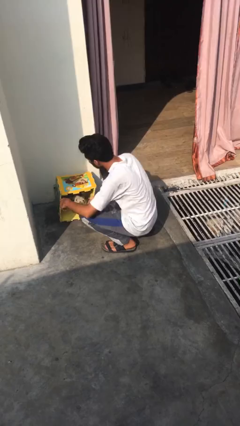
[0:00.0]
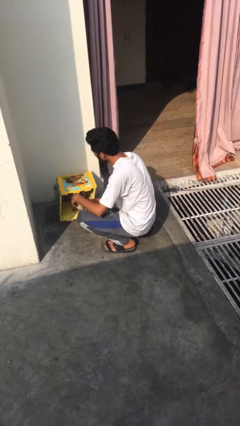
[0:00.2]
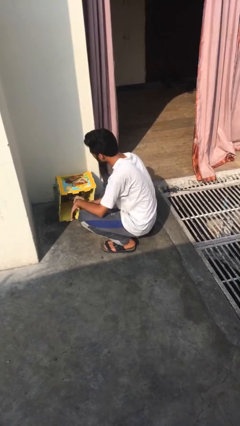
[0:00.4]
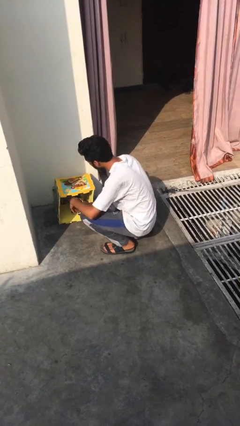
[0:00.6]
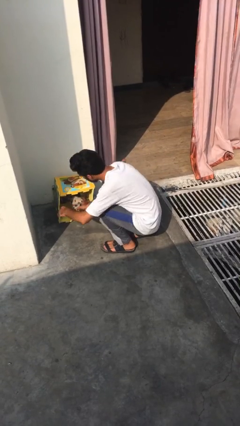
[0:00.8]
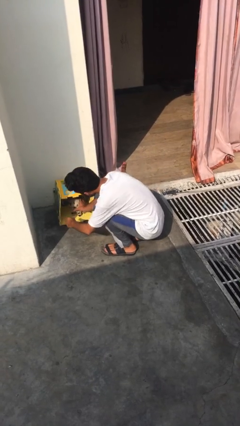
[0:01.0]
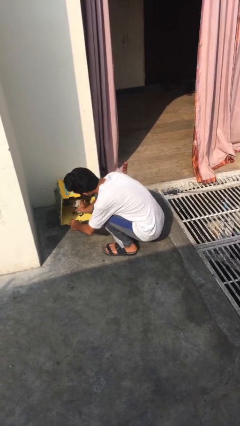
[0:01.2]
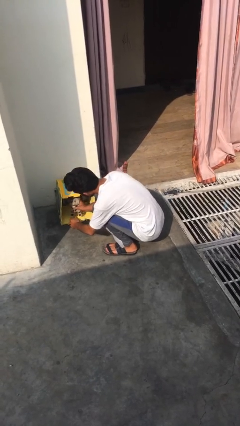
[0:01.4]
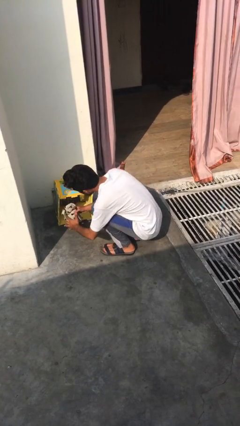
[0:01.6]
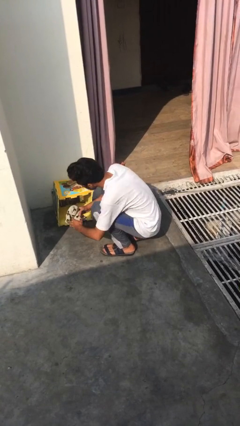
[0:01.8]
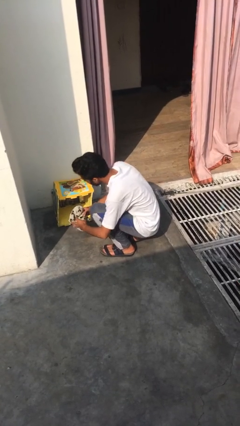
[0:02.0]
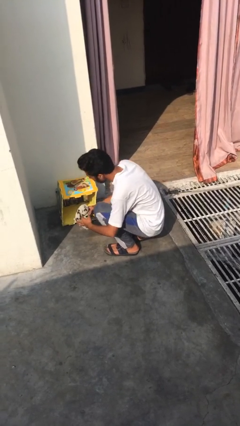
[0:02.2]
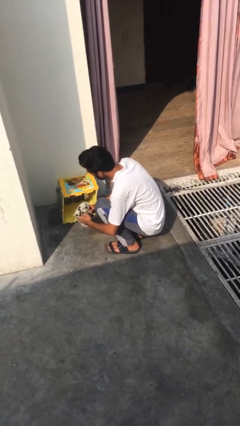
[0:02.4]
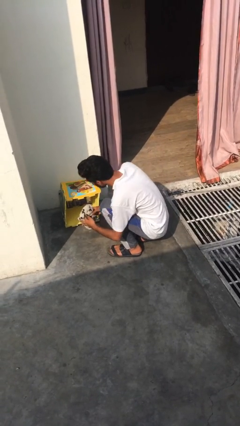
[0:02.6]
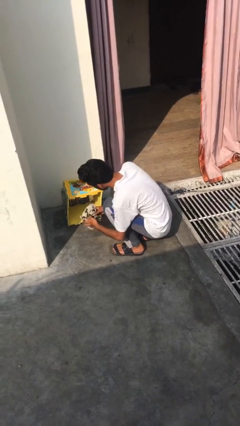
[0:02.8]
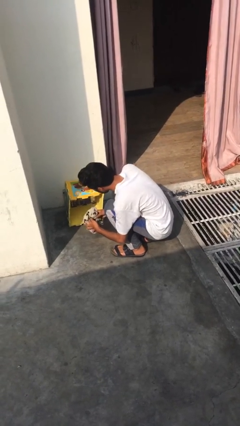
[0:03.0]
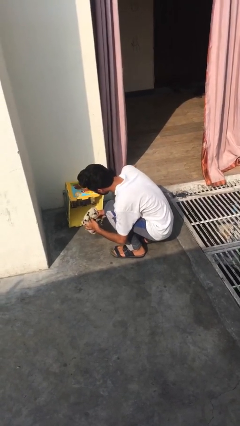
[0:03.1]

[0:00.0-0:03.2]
person uncrates dog

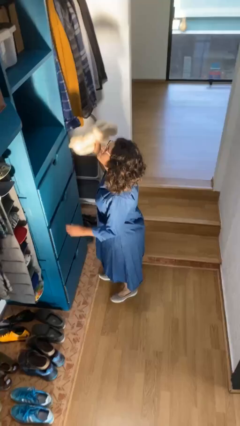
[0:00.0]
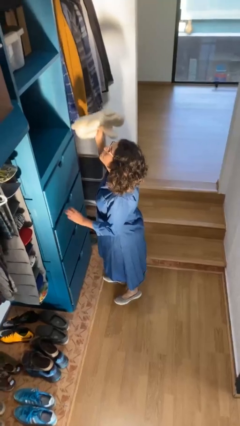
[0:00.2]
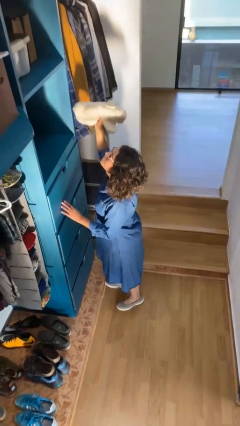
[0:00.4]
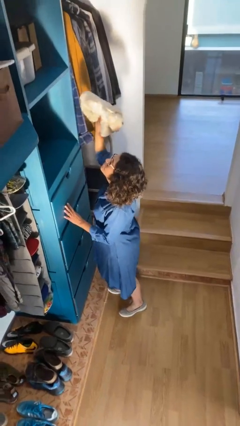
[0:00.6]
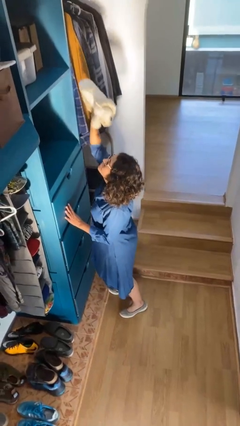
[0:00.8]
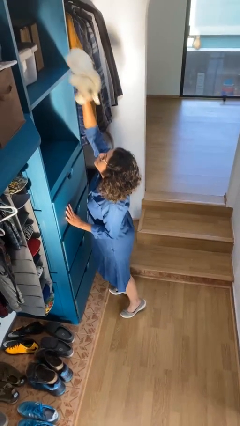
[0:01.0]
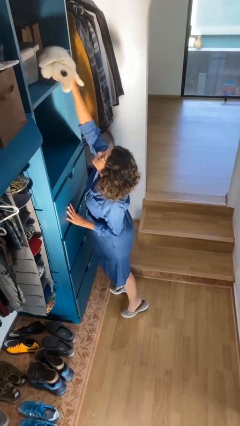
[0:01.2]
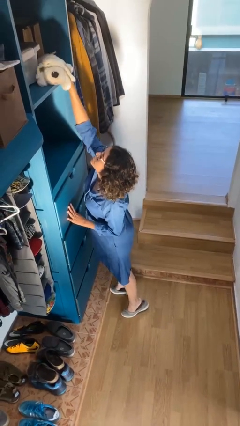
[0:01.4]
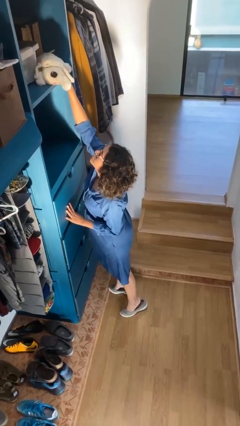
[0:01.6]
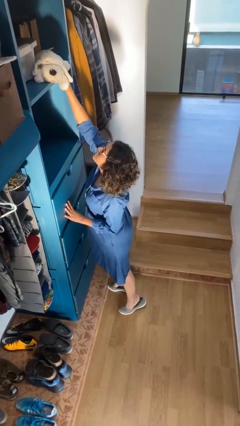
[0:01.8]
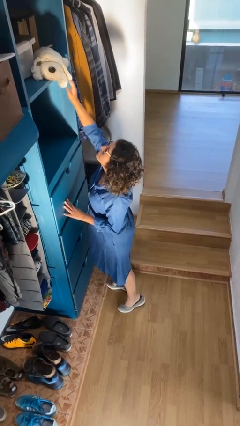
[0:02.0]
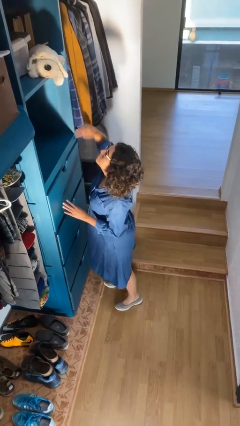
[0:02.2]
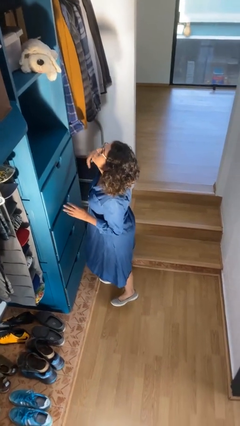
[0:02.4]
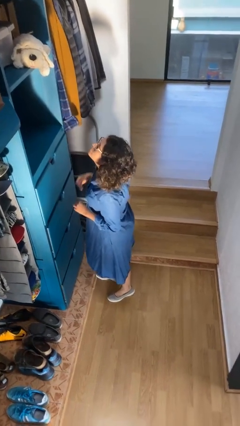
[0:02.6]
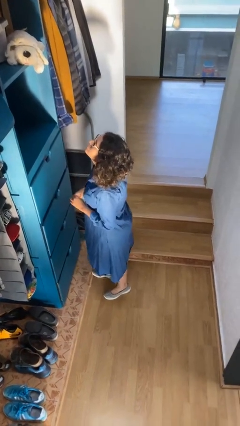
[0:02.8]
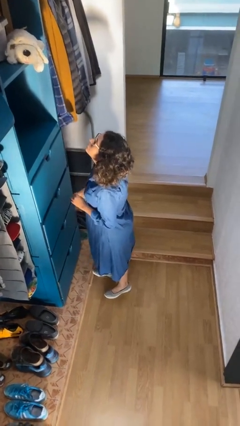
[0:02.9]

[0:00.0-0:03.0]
person puts down object on shelf

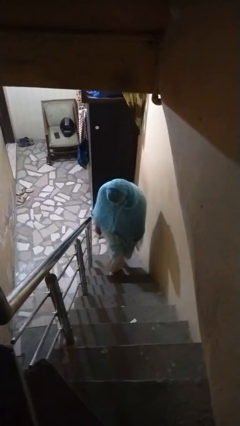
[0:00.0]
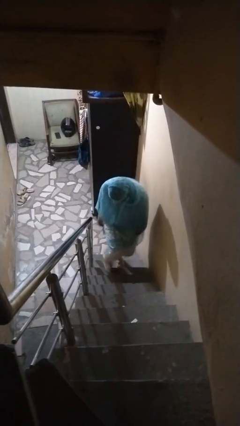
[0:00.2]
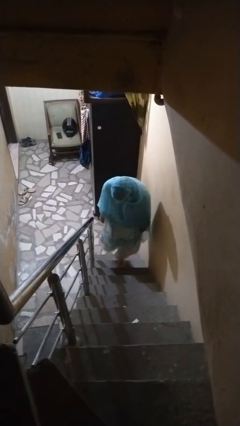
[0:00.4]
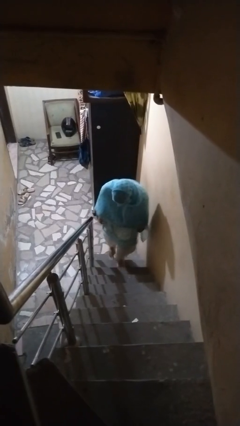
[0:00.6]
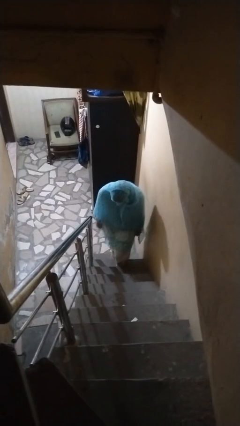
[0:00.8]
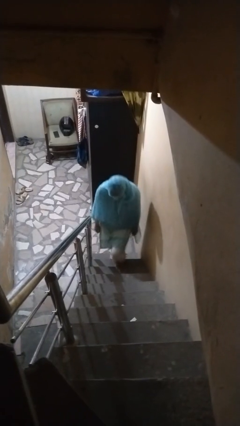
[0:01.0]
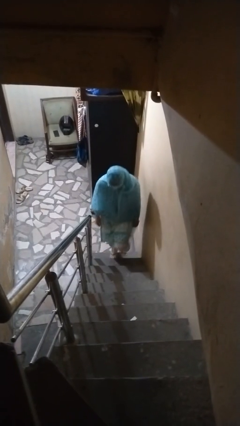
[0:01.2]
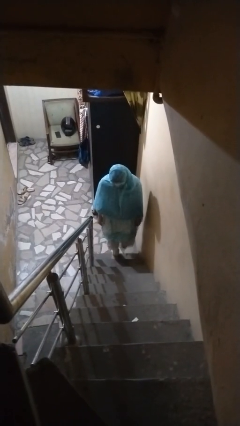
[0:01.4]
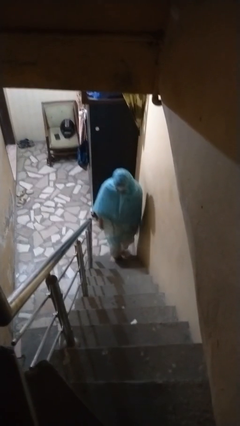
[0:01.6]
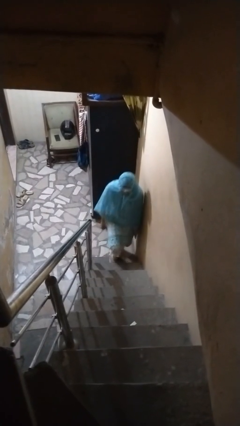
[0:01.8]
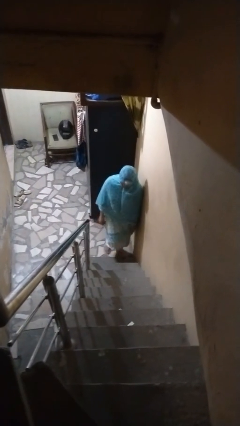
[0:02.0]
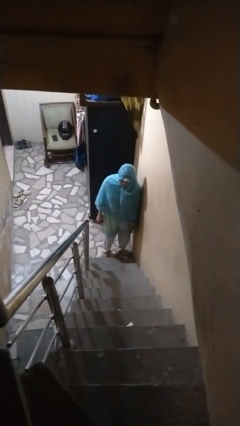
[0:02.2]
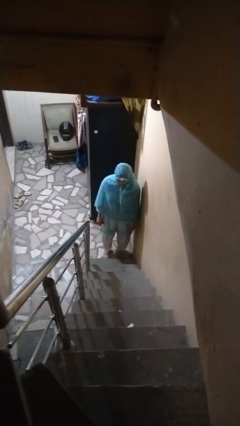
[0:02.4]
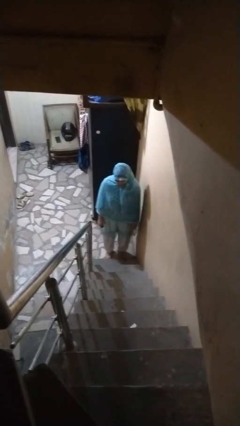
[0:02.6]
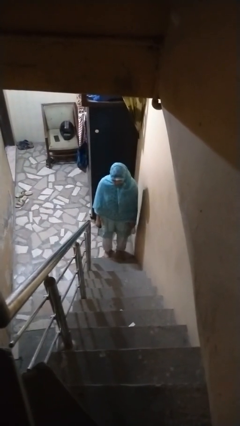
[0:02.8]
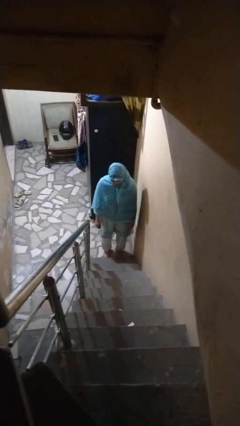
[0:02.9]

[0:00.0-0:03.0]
person climbs down stairs

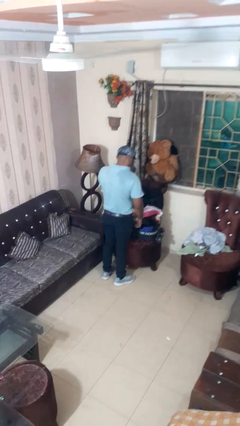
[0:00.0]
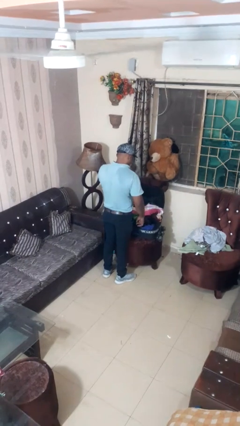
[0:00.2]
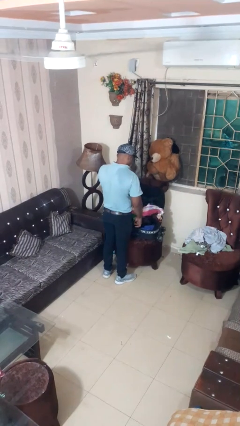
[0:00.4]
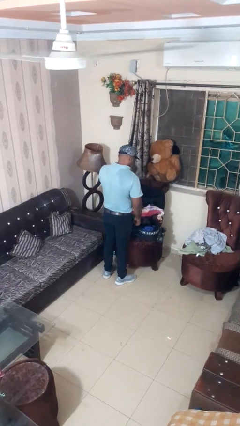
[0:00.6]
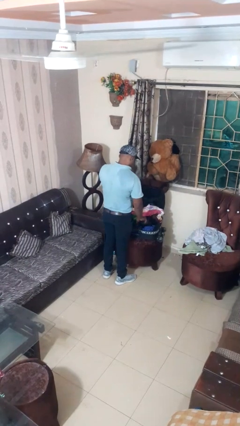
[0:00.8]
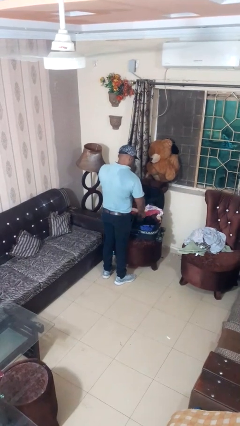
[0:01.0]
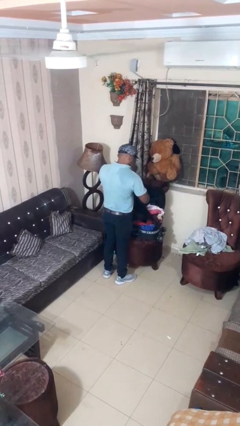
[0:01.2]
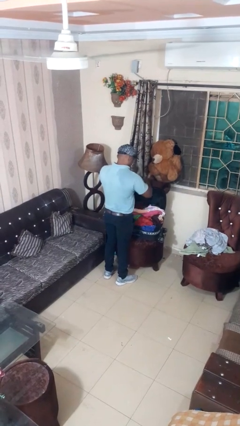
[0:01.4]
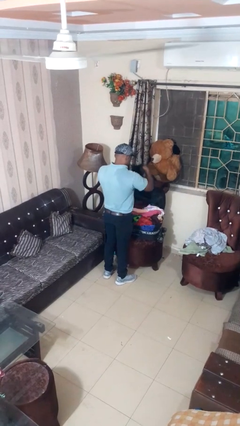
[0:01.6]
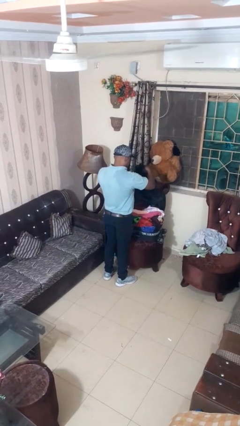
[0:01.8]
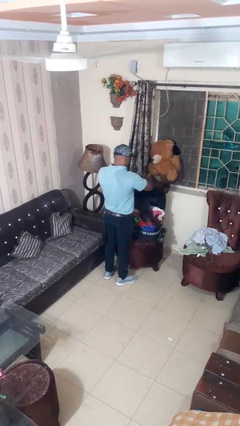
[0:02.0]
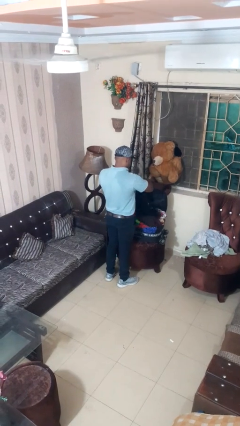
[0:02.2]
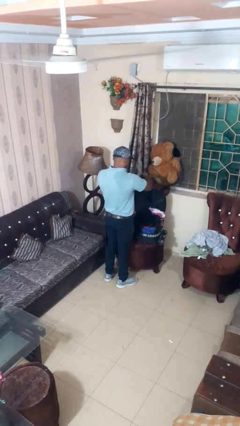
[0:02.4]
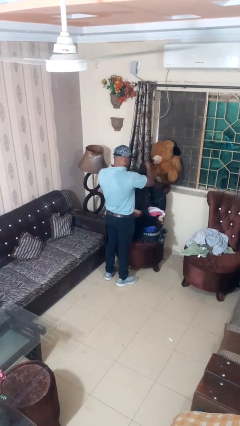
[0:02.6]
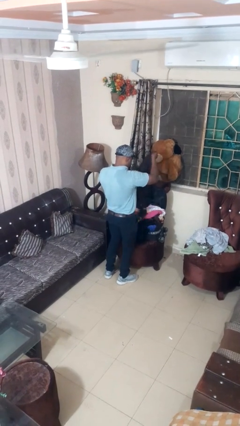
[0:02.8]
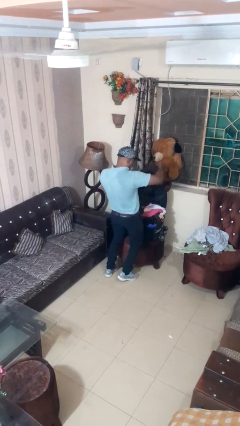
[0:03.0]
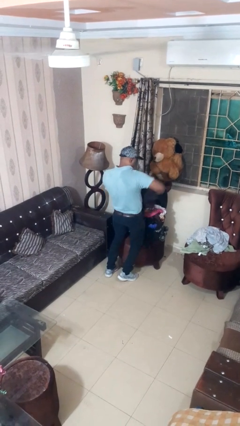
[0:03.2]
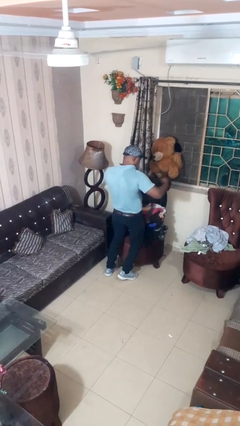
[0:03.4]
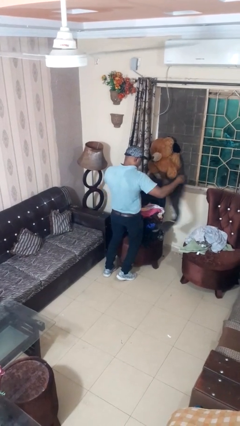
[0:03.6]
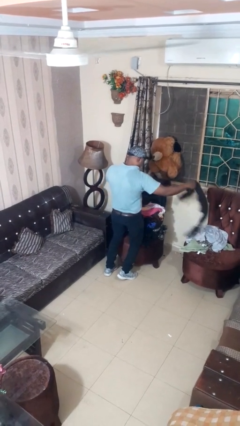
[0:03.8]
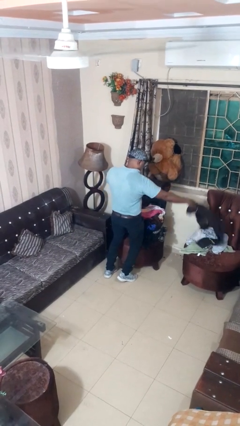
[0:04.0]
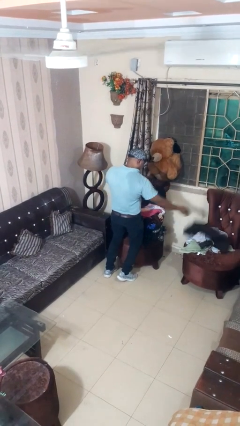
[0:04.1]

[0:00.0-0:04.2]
person unloads clothes from suitcase

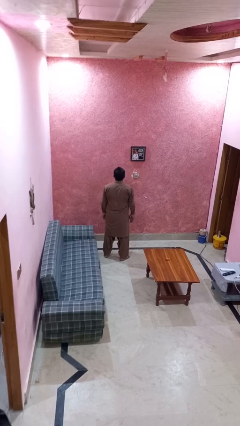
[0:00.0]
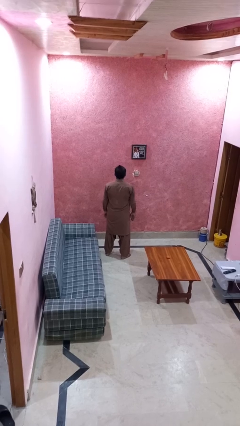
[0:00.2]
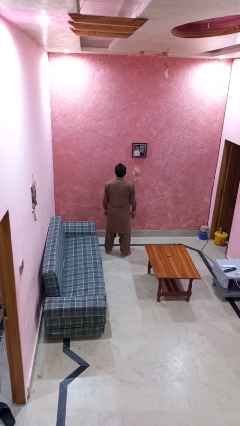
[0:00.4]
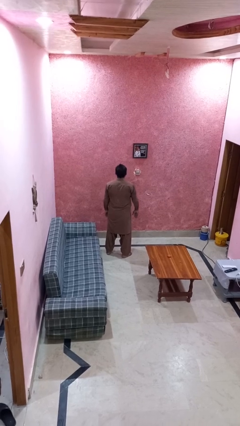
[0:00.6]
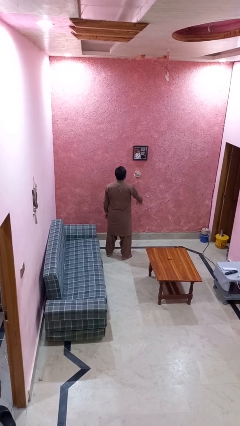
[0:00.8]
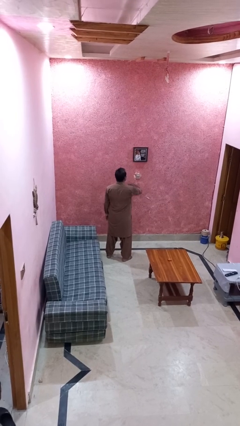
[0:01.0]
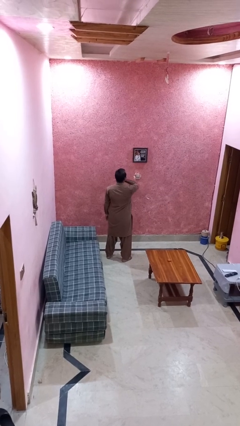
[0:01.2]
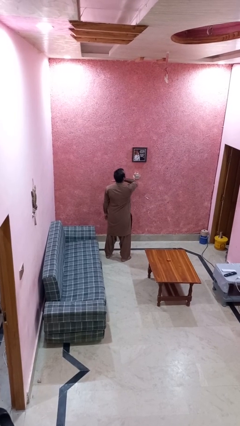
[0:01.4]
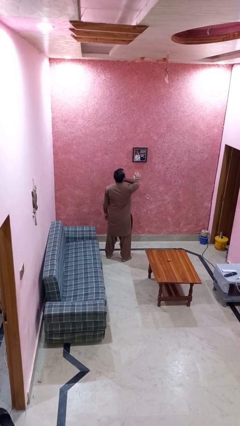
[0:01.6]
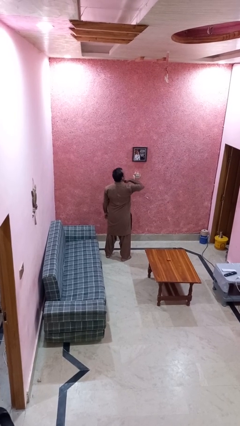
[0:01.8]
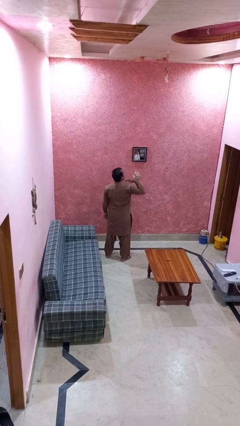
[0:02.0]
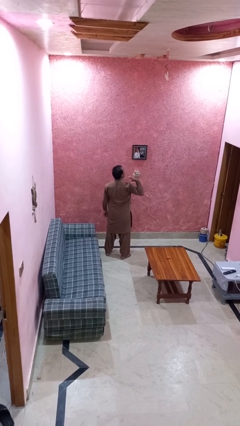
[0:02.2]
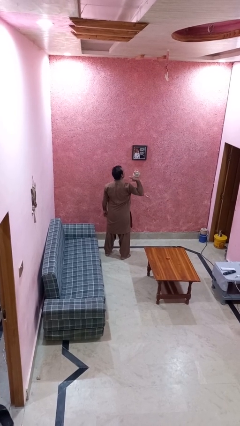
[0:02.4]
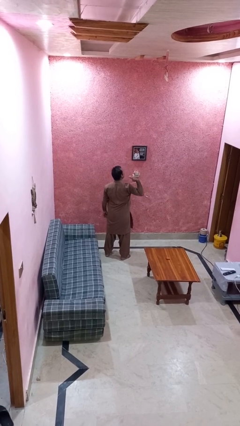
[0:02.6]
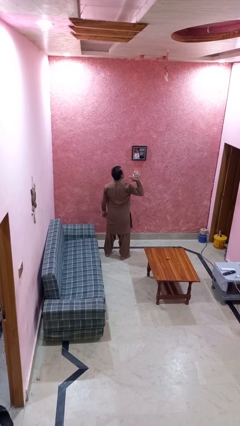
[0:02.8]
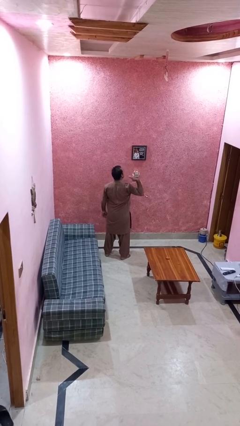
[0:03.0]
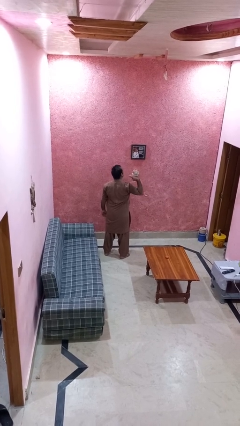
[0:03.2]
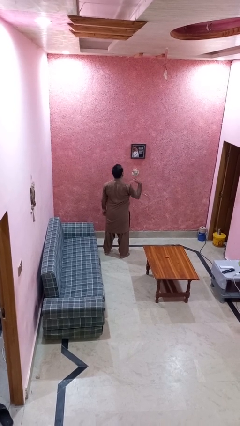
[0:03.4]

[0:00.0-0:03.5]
person gestures cut

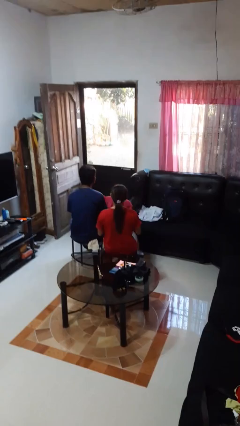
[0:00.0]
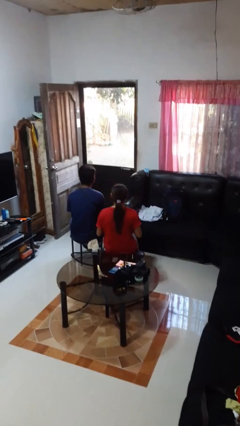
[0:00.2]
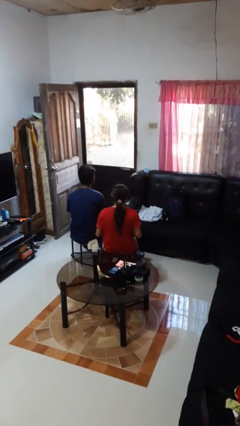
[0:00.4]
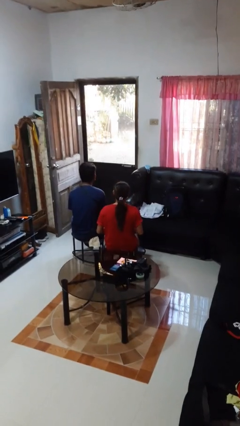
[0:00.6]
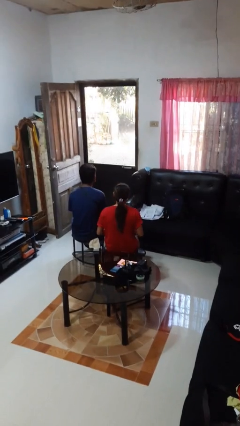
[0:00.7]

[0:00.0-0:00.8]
person hits person with pillow
